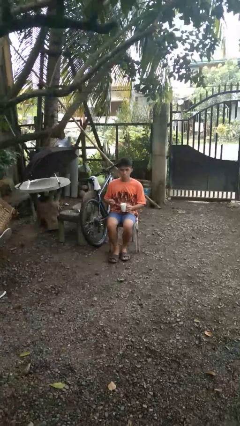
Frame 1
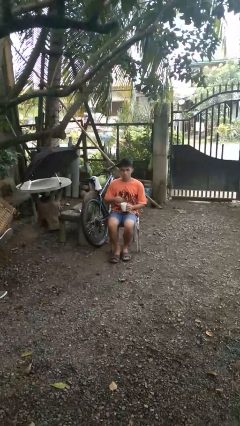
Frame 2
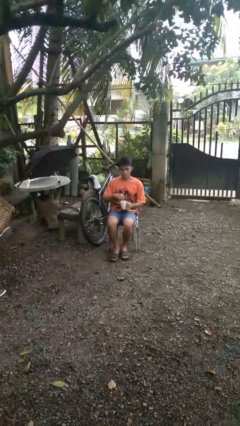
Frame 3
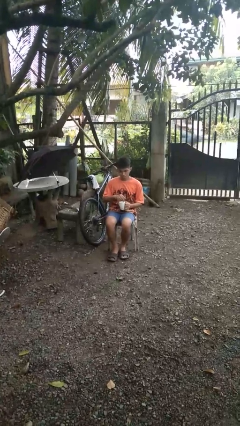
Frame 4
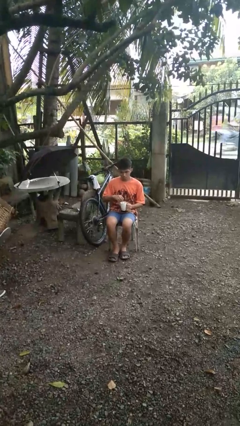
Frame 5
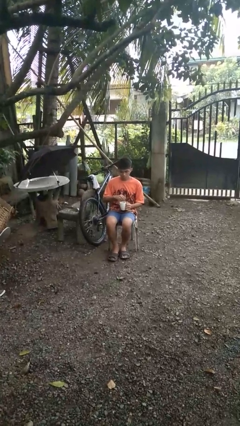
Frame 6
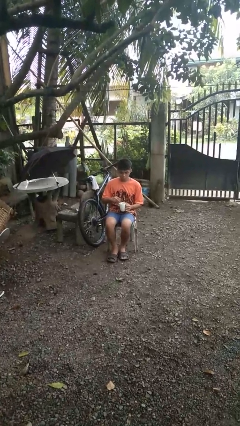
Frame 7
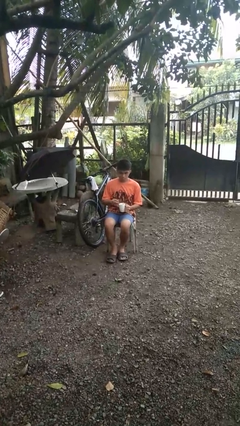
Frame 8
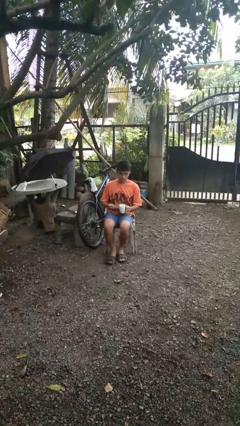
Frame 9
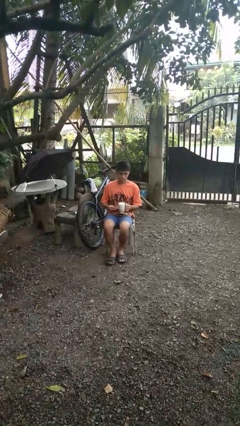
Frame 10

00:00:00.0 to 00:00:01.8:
person stirs mug

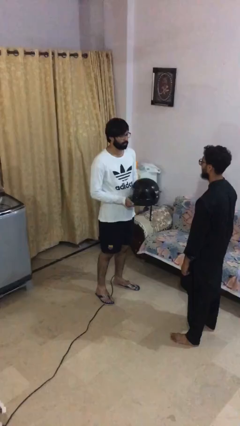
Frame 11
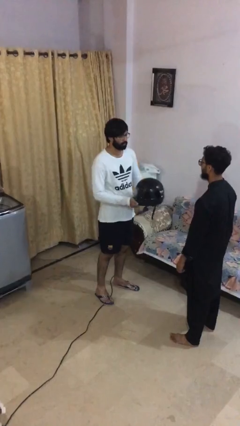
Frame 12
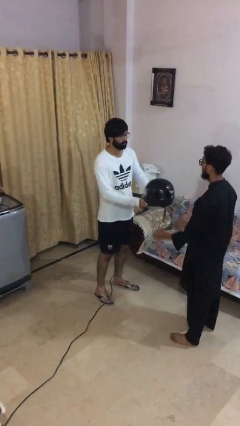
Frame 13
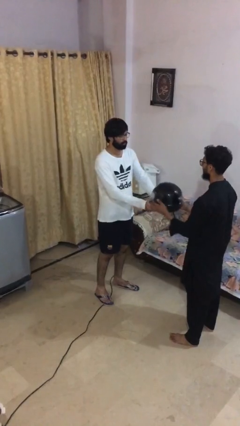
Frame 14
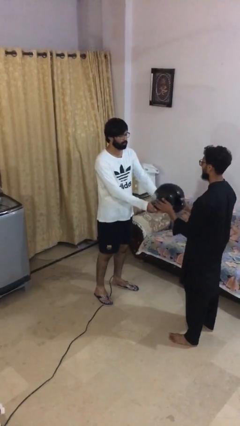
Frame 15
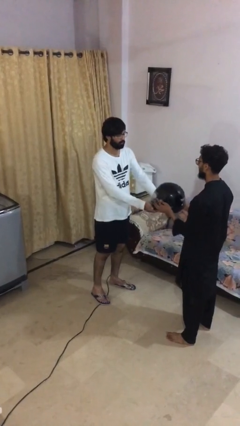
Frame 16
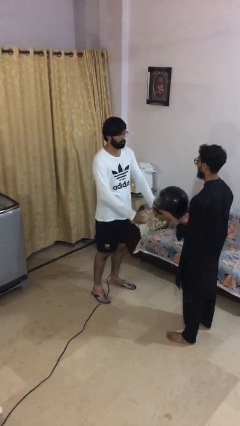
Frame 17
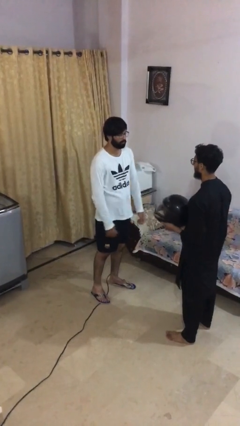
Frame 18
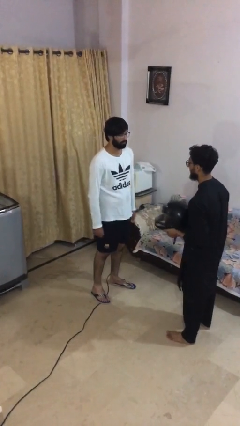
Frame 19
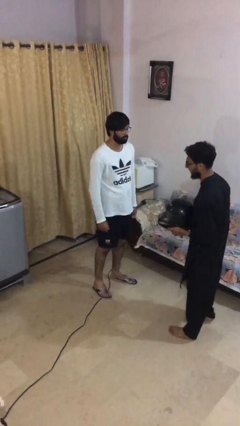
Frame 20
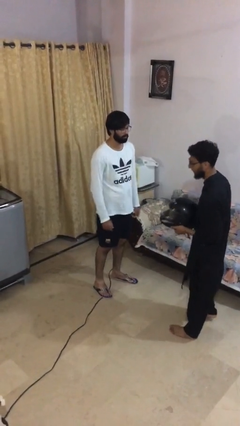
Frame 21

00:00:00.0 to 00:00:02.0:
person transfers object to person

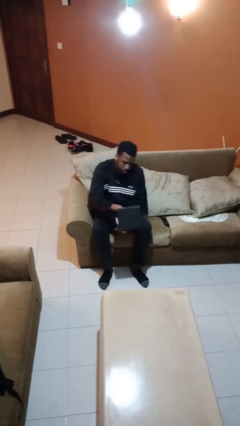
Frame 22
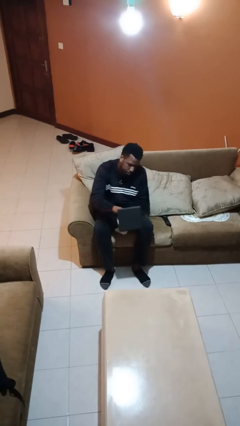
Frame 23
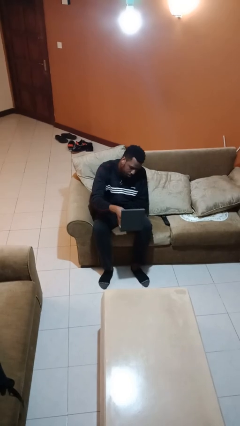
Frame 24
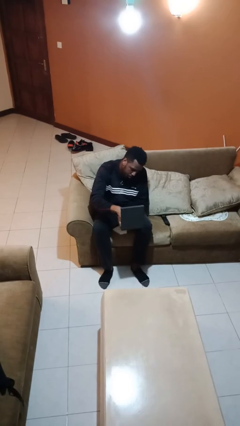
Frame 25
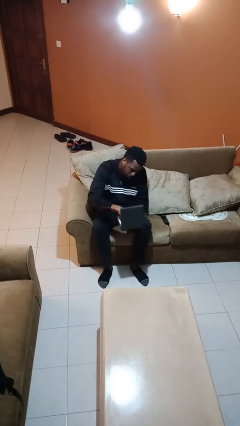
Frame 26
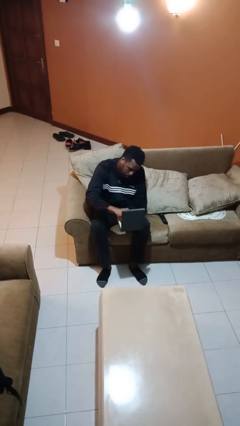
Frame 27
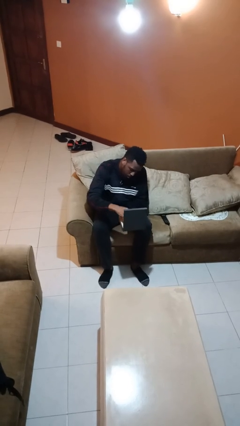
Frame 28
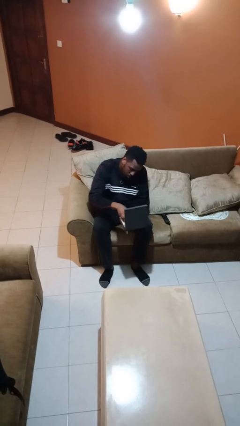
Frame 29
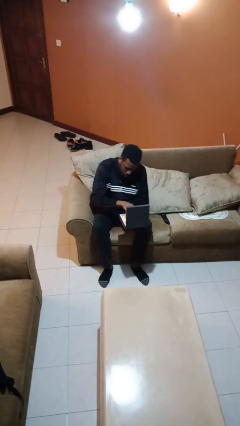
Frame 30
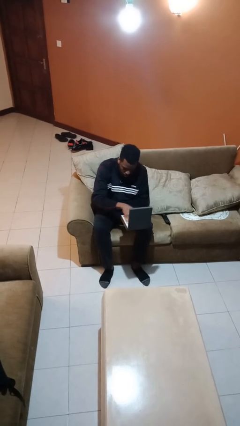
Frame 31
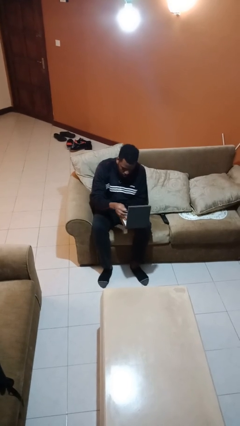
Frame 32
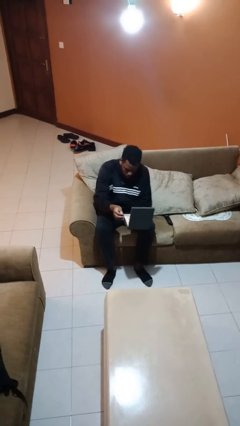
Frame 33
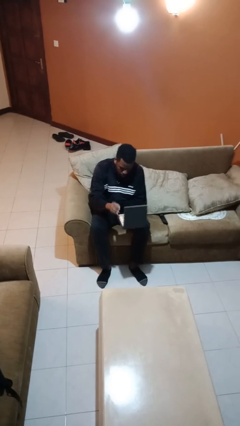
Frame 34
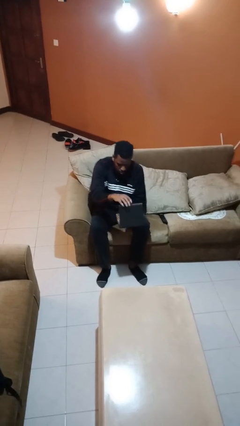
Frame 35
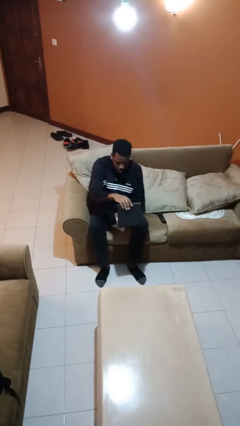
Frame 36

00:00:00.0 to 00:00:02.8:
person searches jewelry box

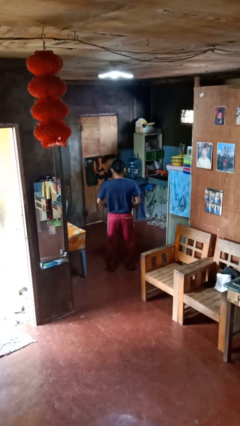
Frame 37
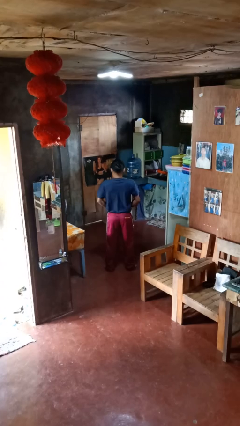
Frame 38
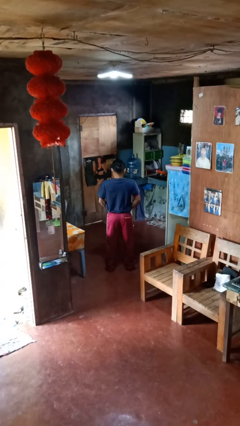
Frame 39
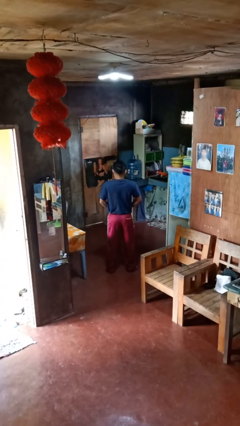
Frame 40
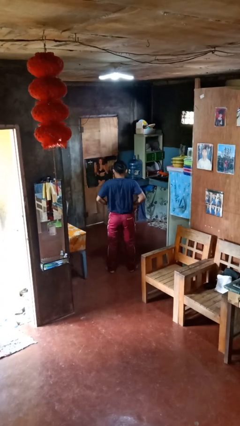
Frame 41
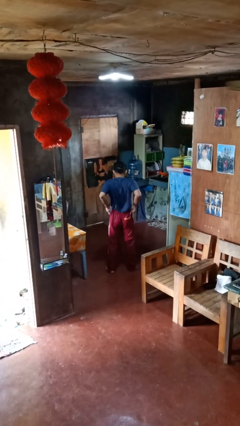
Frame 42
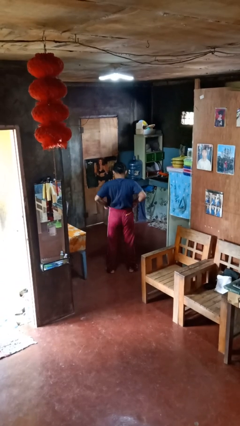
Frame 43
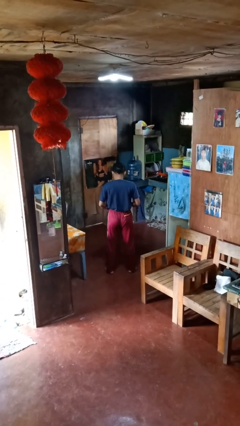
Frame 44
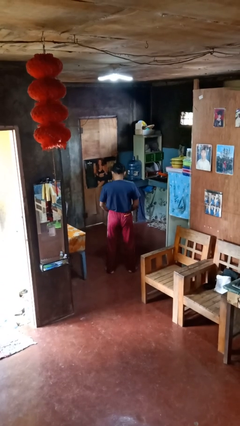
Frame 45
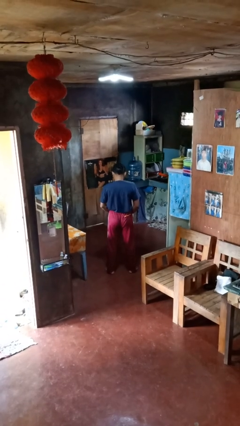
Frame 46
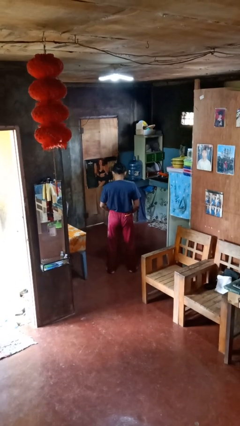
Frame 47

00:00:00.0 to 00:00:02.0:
person hikes up pants

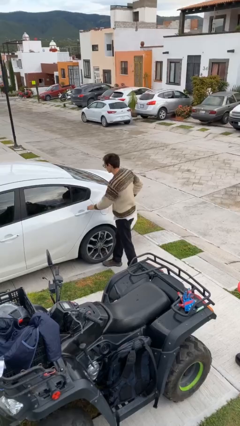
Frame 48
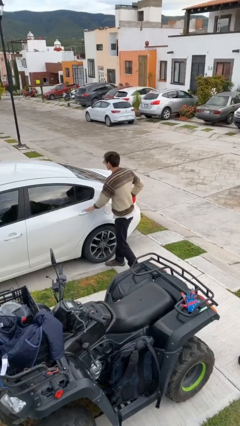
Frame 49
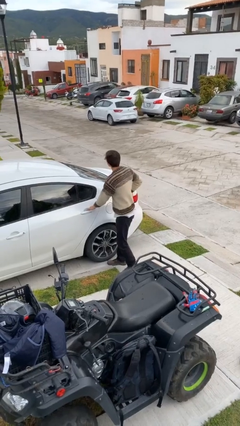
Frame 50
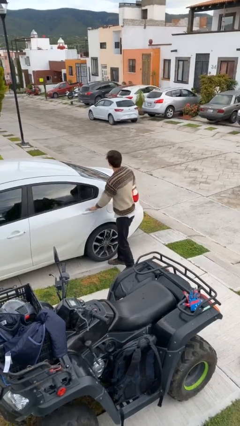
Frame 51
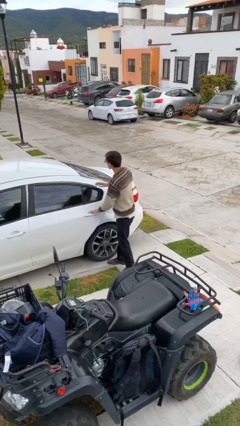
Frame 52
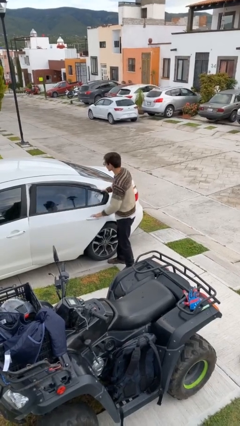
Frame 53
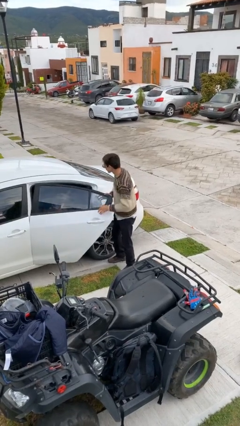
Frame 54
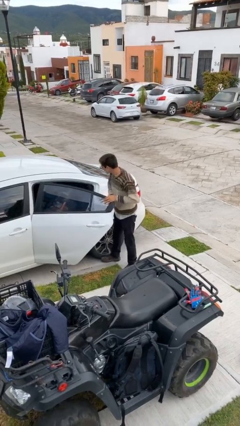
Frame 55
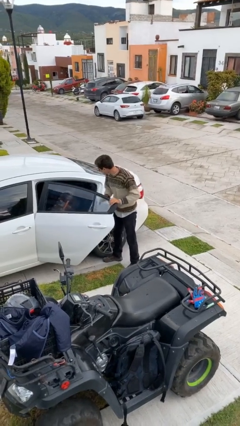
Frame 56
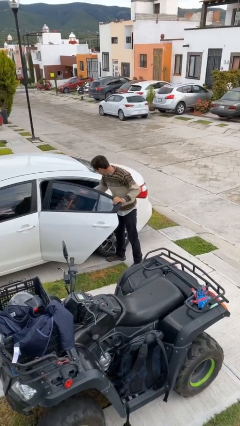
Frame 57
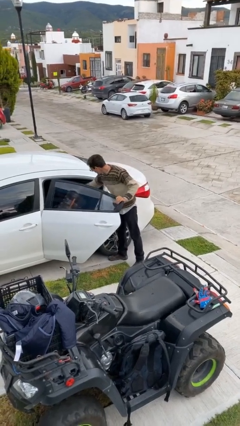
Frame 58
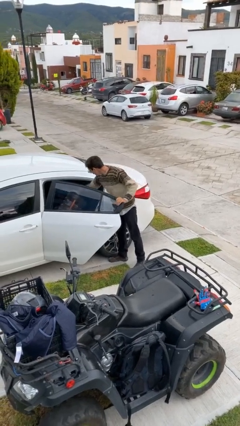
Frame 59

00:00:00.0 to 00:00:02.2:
person opens car door

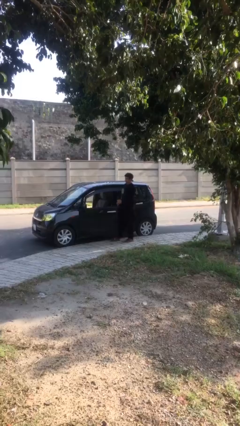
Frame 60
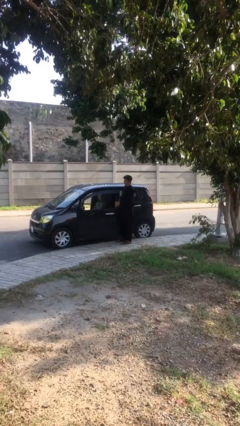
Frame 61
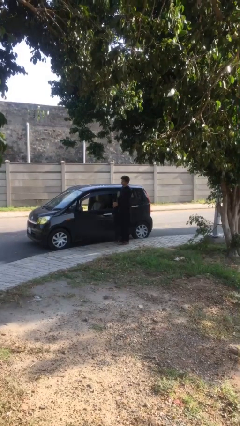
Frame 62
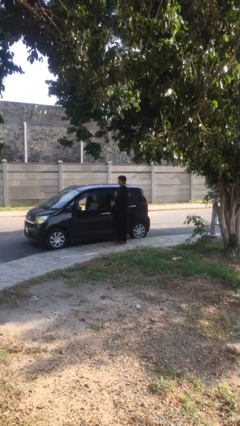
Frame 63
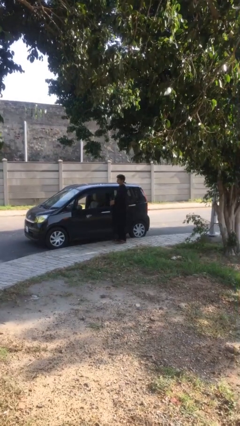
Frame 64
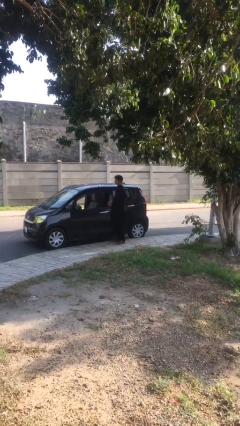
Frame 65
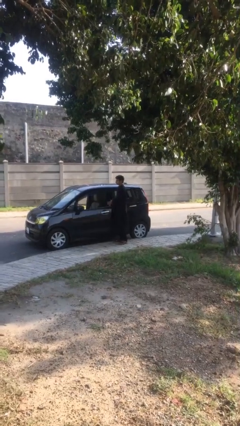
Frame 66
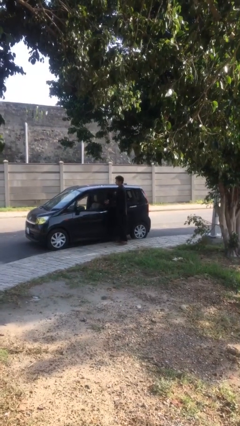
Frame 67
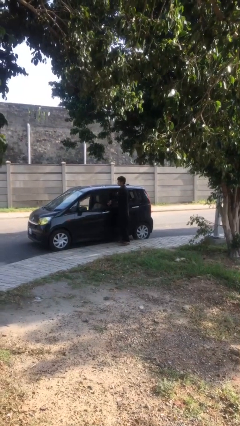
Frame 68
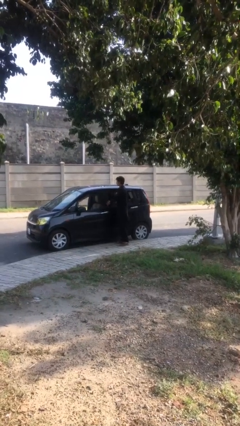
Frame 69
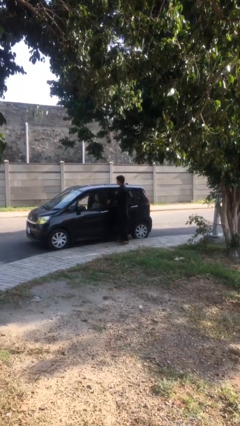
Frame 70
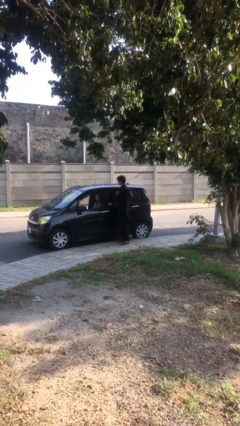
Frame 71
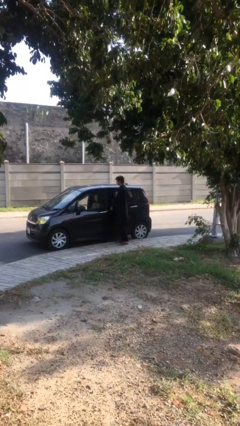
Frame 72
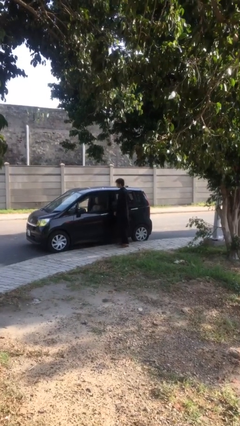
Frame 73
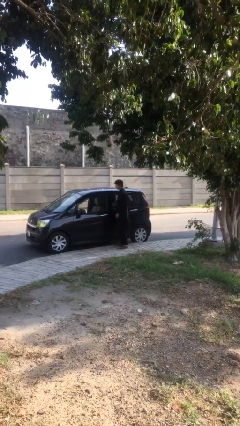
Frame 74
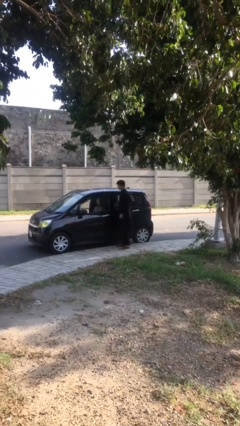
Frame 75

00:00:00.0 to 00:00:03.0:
person closes car door

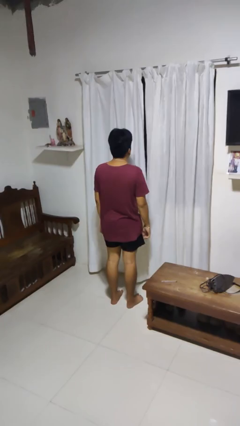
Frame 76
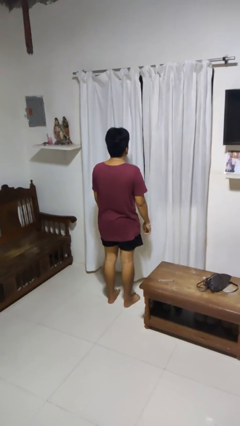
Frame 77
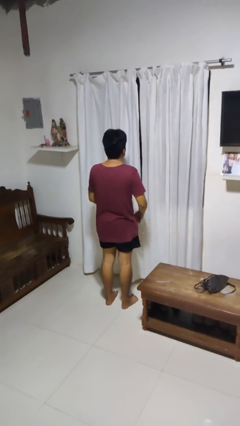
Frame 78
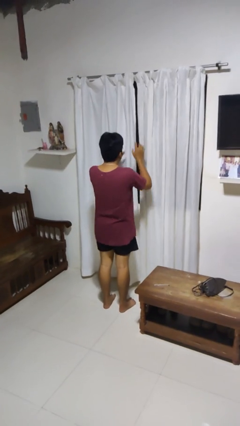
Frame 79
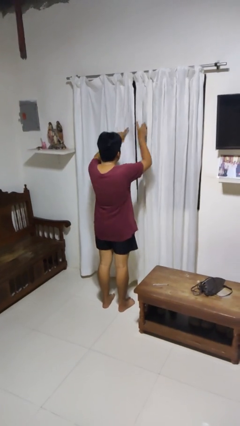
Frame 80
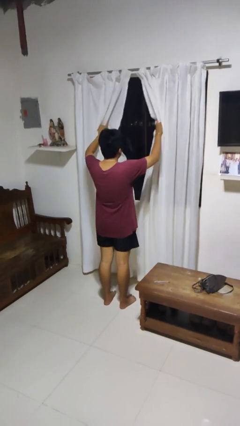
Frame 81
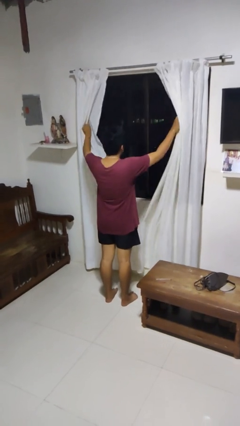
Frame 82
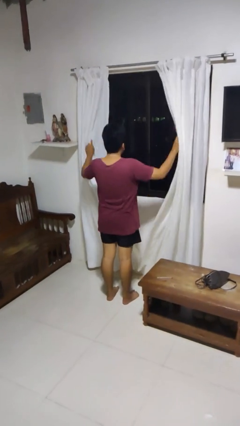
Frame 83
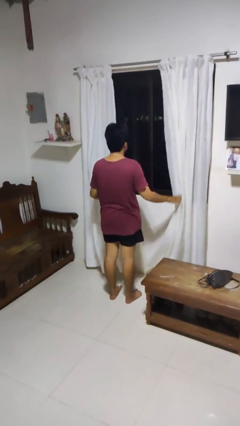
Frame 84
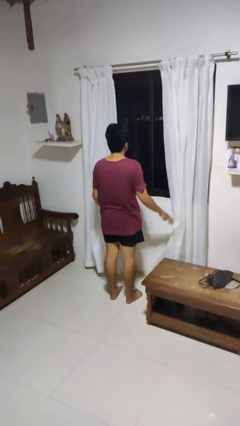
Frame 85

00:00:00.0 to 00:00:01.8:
person opens curtains

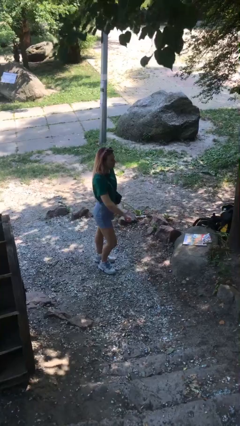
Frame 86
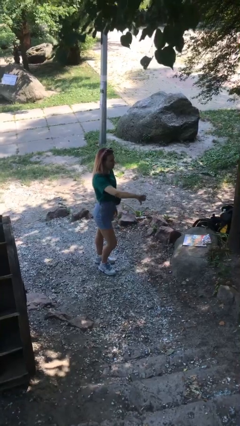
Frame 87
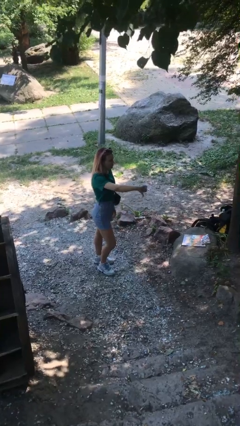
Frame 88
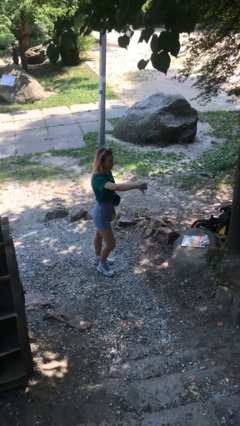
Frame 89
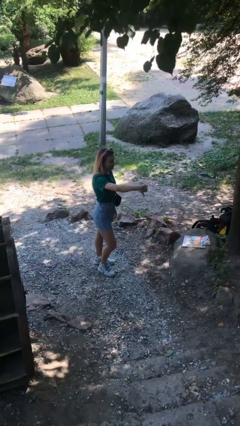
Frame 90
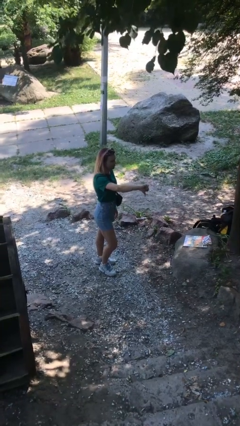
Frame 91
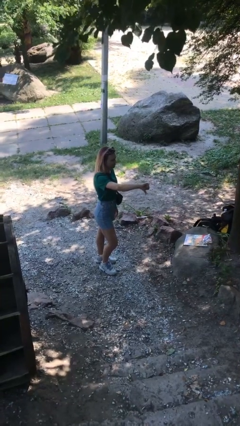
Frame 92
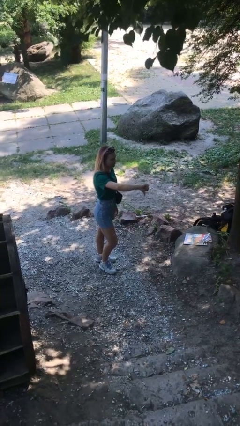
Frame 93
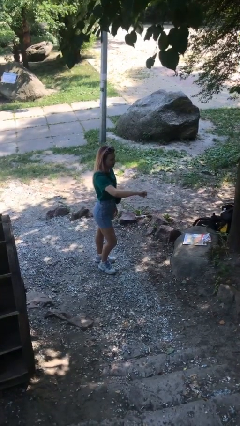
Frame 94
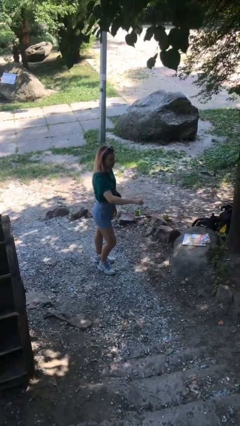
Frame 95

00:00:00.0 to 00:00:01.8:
person gestures thumbs down
